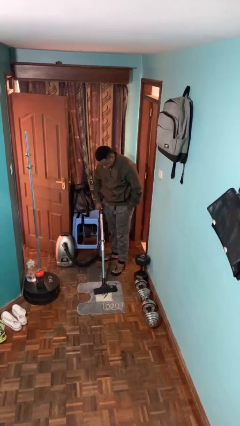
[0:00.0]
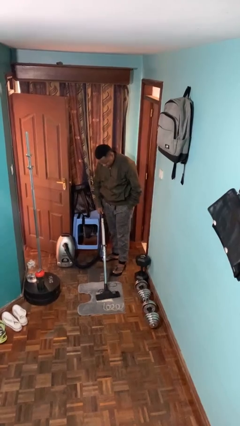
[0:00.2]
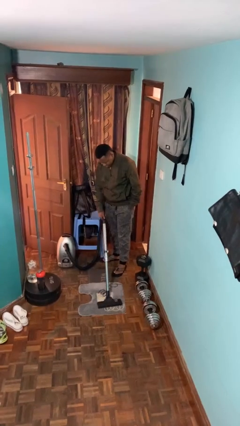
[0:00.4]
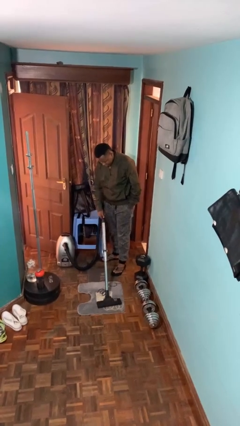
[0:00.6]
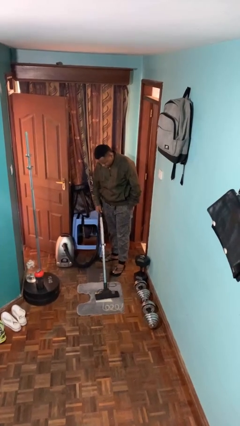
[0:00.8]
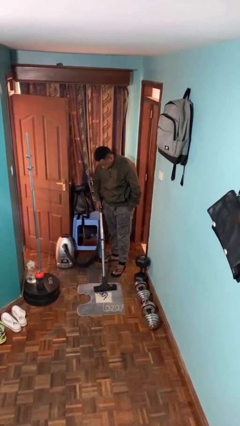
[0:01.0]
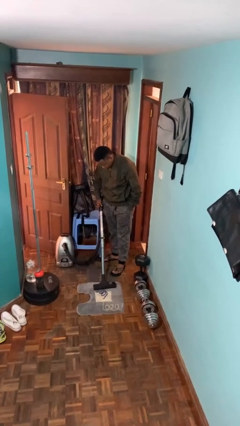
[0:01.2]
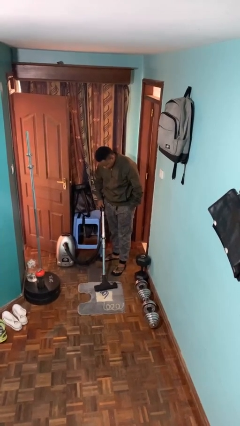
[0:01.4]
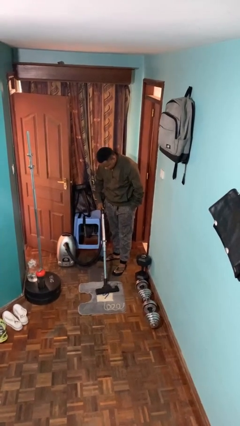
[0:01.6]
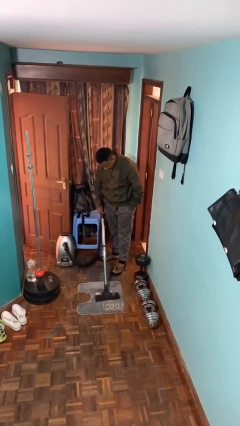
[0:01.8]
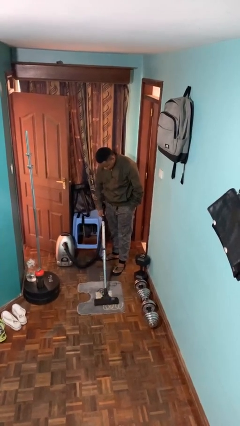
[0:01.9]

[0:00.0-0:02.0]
person vacuums carpet

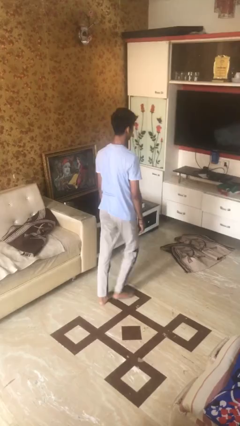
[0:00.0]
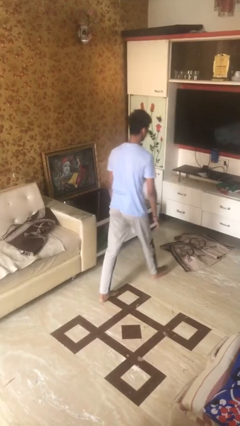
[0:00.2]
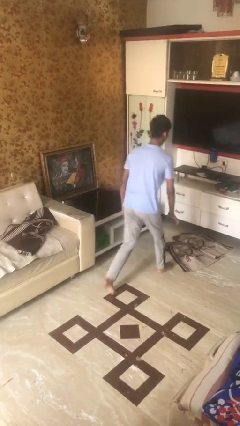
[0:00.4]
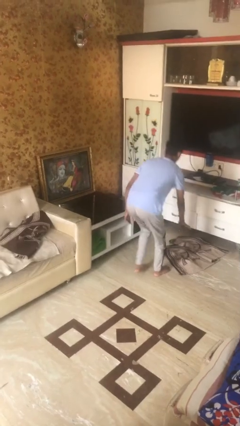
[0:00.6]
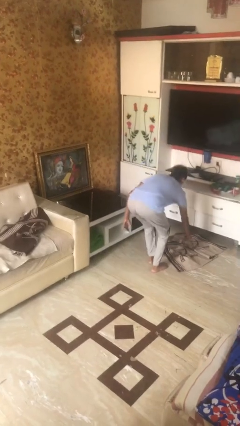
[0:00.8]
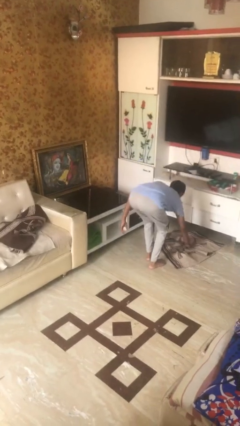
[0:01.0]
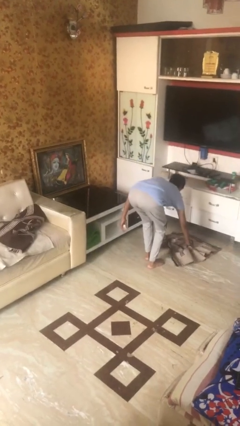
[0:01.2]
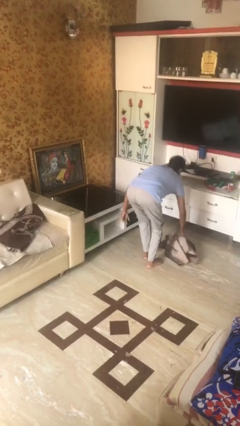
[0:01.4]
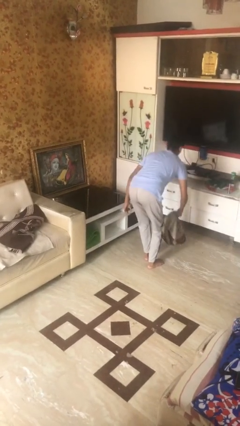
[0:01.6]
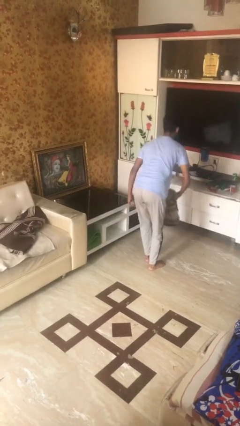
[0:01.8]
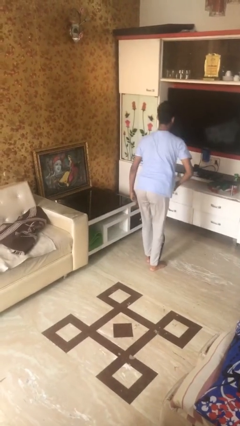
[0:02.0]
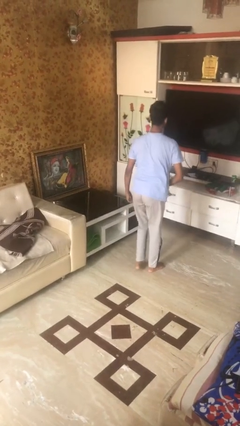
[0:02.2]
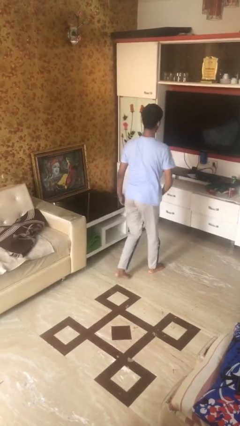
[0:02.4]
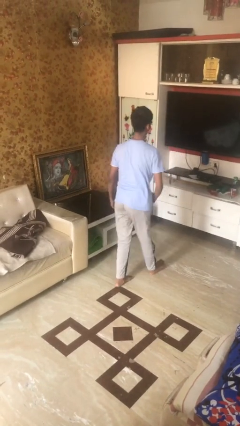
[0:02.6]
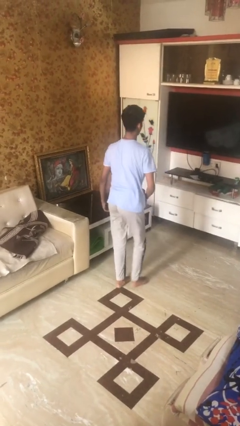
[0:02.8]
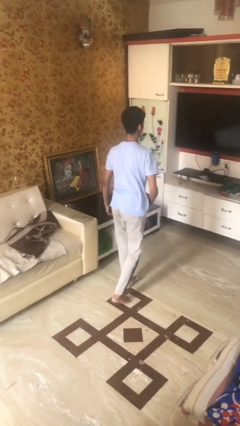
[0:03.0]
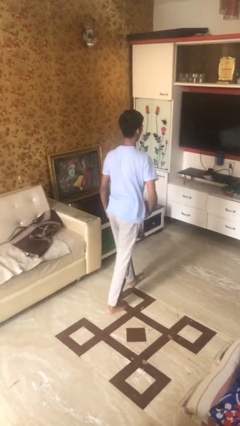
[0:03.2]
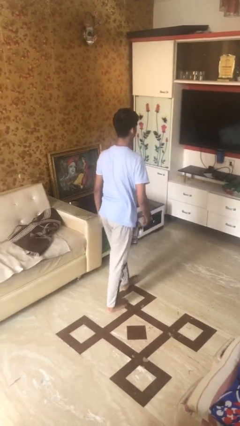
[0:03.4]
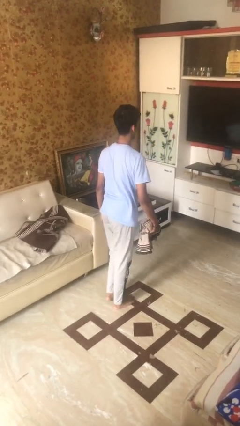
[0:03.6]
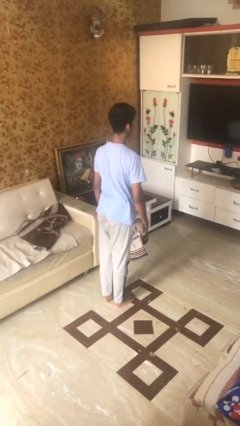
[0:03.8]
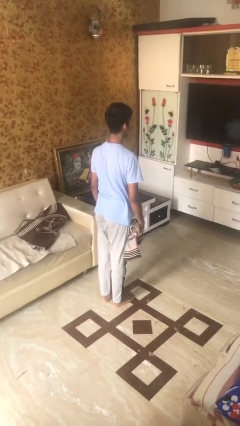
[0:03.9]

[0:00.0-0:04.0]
person picks up object from floor

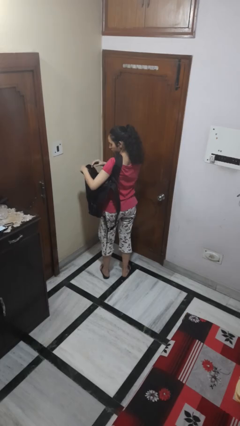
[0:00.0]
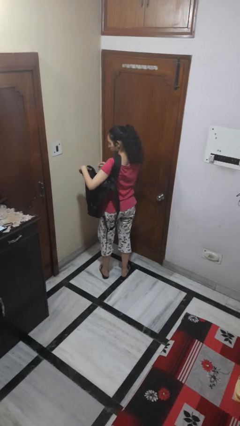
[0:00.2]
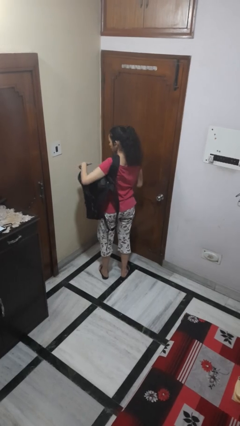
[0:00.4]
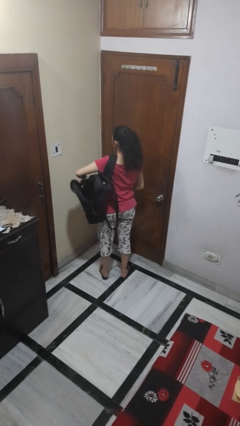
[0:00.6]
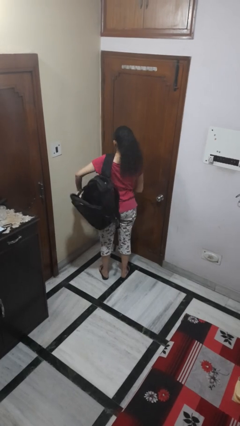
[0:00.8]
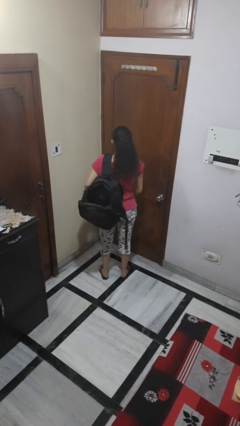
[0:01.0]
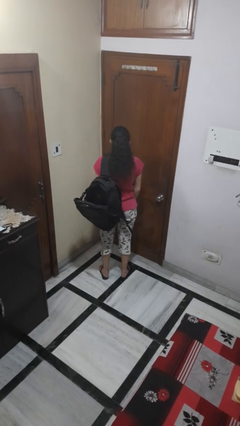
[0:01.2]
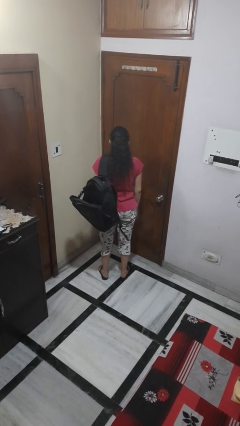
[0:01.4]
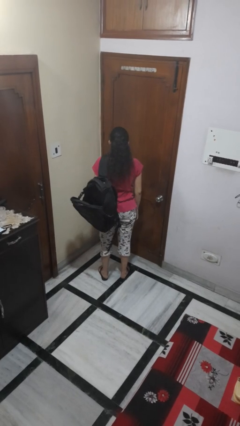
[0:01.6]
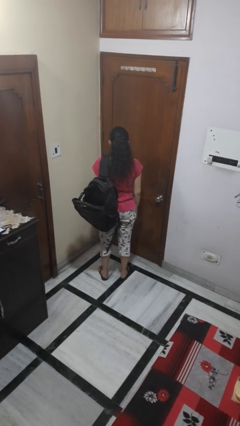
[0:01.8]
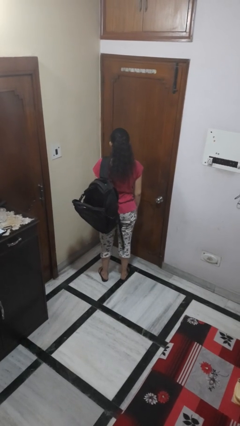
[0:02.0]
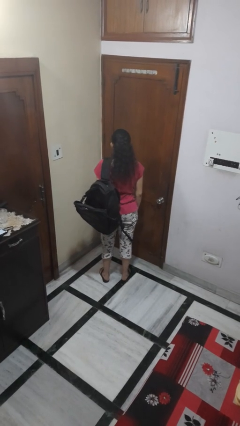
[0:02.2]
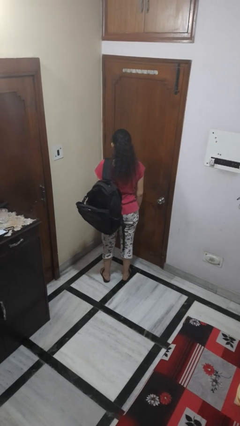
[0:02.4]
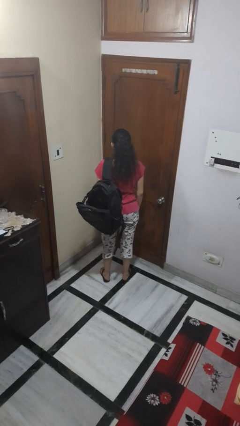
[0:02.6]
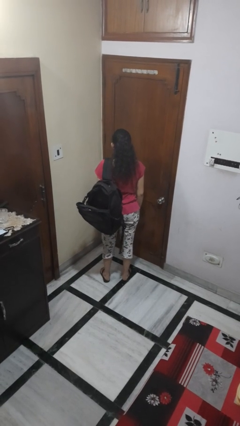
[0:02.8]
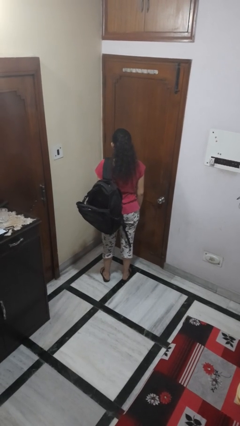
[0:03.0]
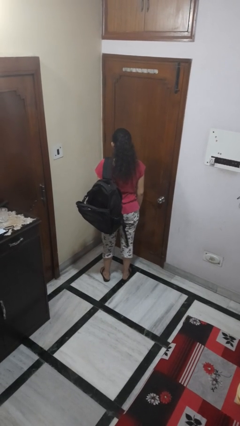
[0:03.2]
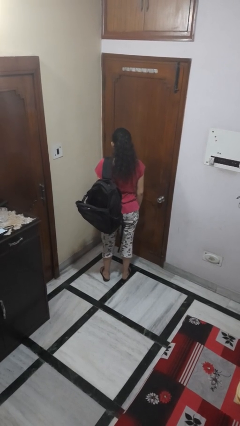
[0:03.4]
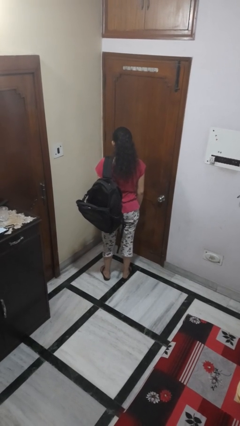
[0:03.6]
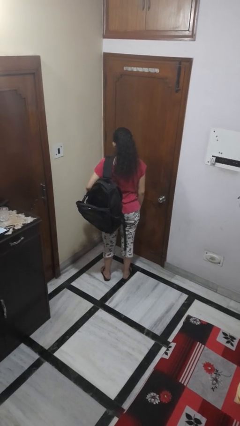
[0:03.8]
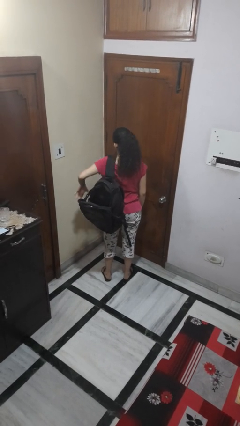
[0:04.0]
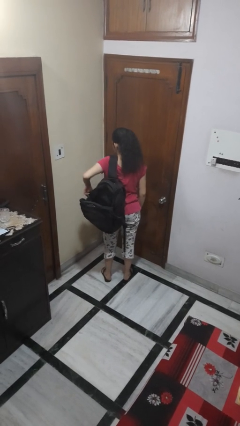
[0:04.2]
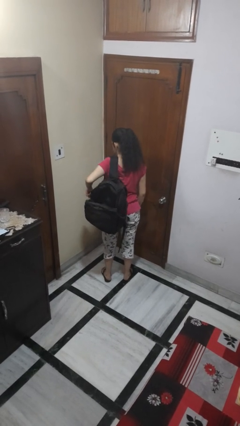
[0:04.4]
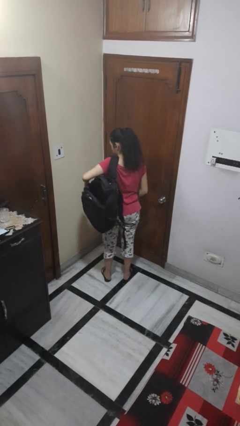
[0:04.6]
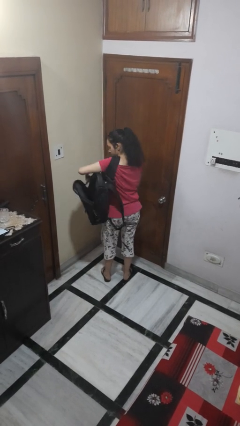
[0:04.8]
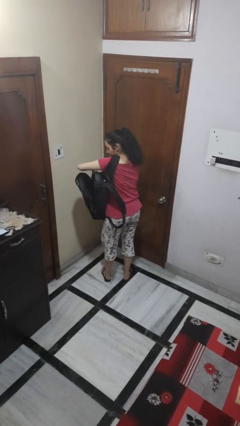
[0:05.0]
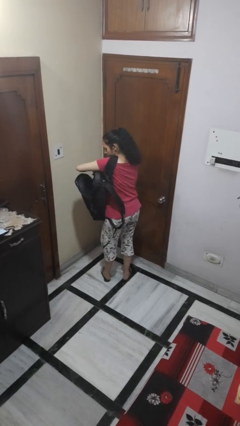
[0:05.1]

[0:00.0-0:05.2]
person puts object into backpack

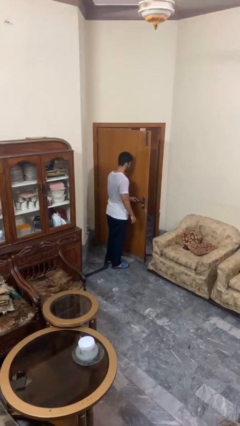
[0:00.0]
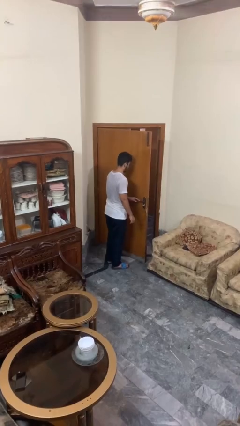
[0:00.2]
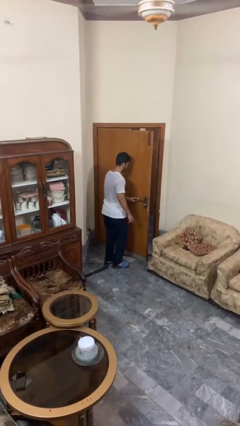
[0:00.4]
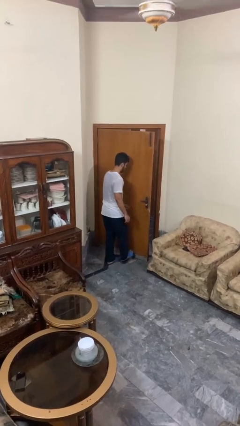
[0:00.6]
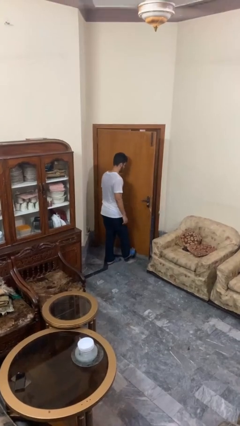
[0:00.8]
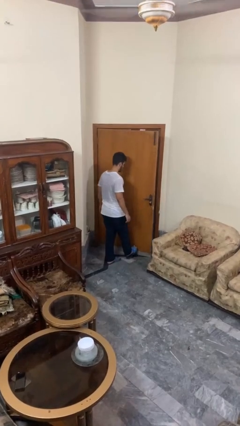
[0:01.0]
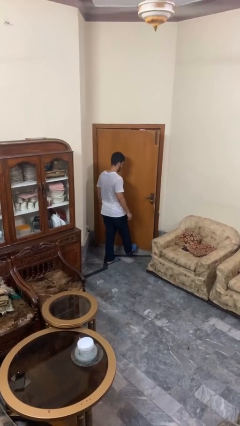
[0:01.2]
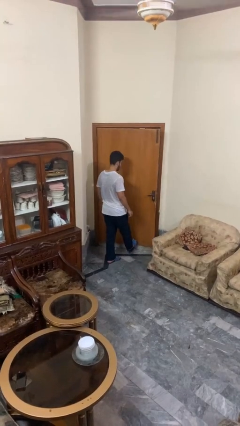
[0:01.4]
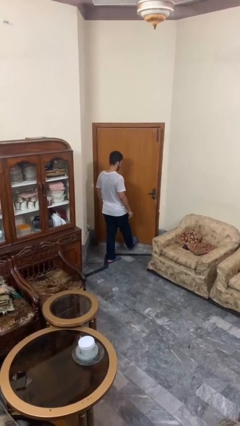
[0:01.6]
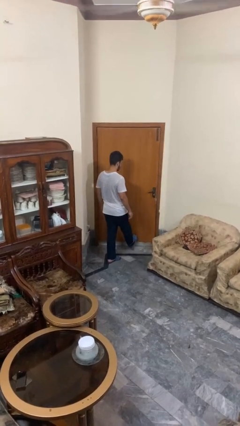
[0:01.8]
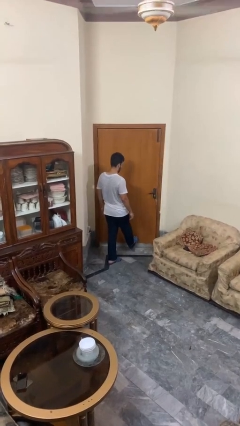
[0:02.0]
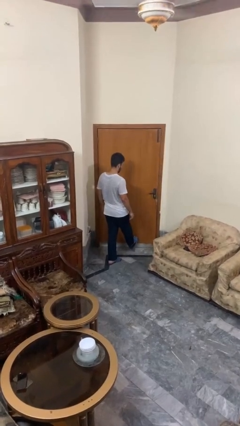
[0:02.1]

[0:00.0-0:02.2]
person closes door with foot

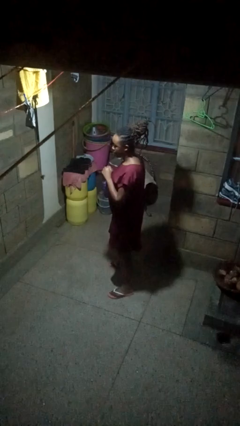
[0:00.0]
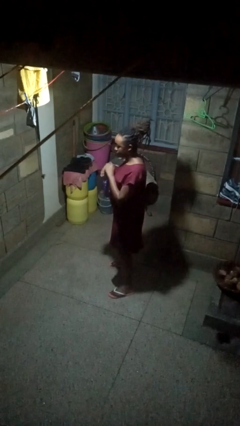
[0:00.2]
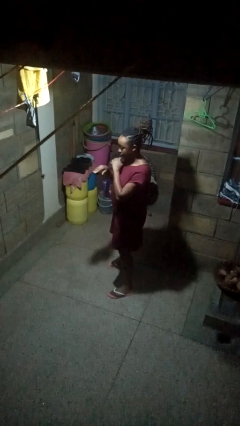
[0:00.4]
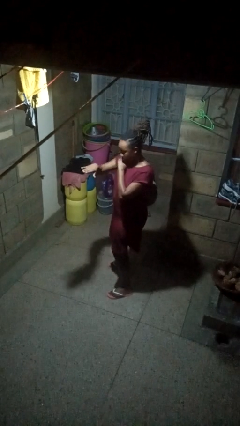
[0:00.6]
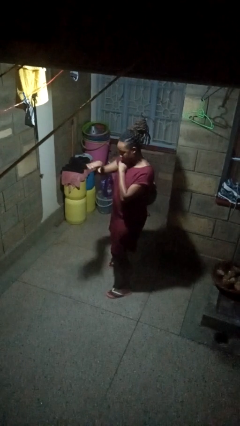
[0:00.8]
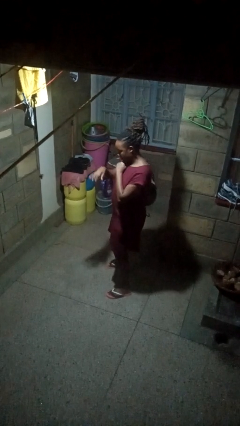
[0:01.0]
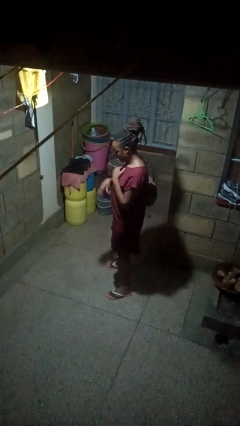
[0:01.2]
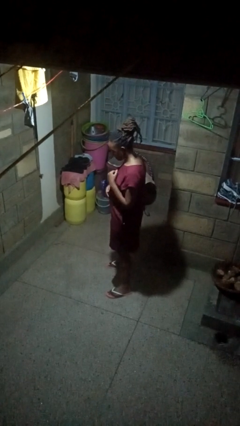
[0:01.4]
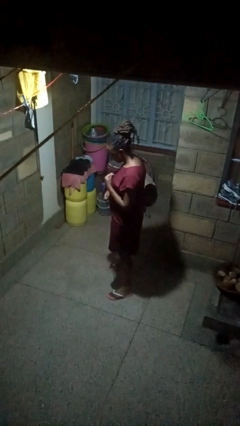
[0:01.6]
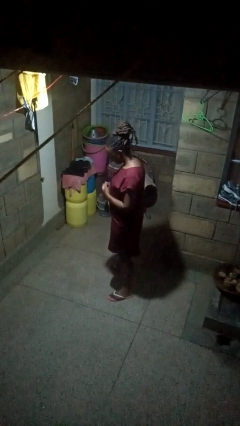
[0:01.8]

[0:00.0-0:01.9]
person karate chop

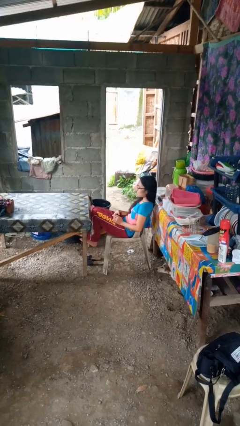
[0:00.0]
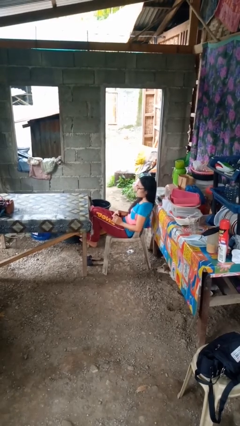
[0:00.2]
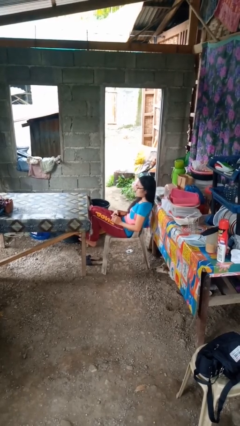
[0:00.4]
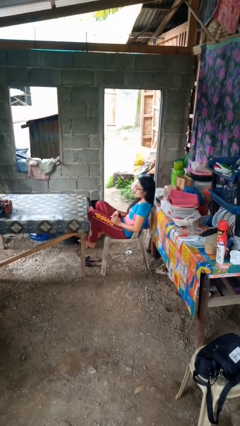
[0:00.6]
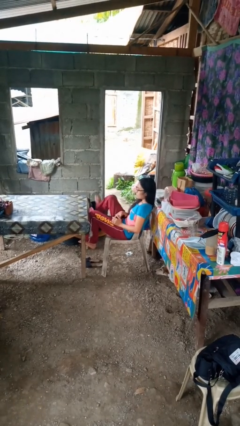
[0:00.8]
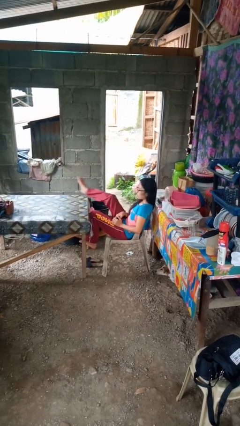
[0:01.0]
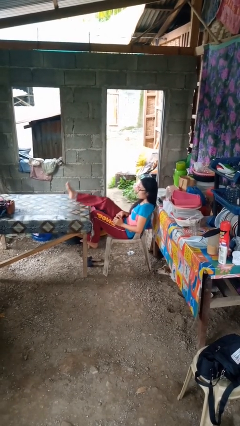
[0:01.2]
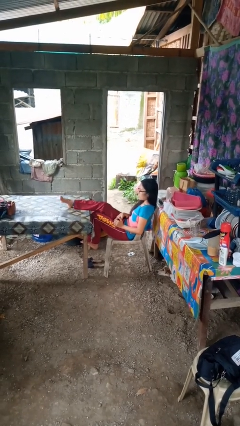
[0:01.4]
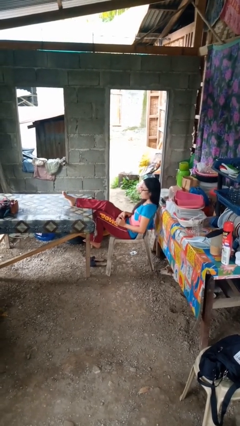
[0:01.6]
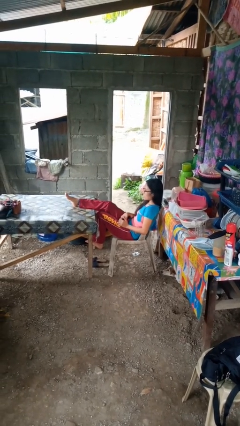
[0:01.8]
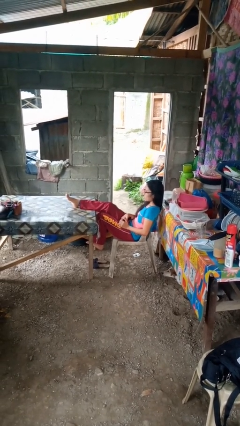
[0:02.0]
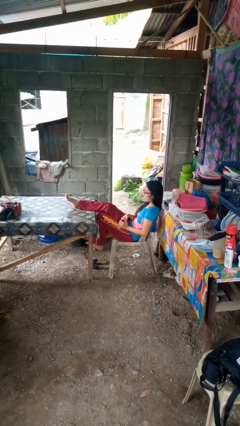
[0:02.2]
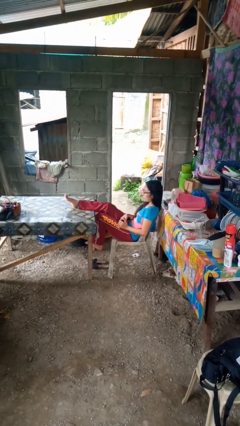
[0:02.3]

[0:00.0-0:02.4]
person puts feet up

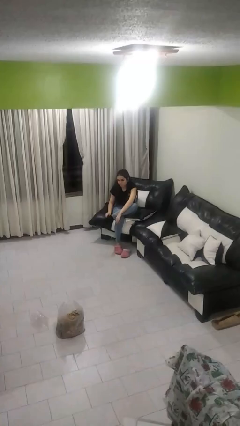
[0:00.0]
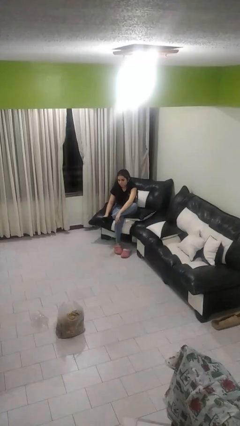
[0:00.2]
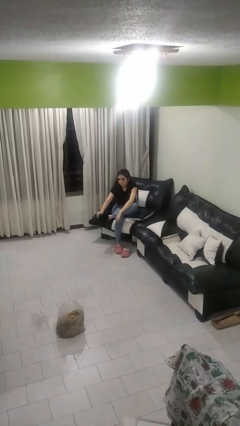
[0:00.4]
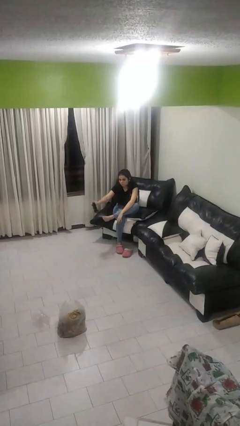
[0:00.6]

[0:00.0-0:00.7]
person takes off socks
